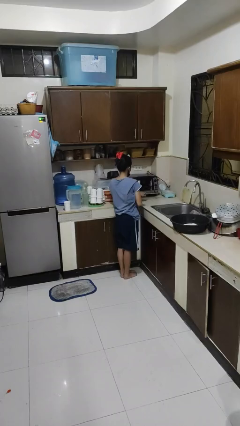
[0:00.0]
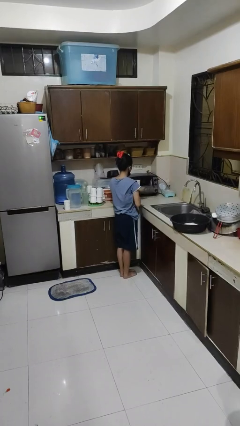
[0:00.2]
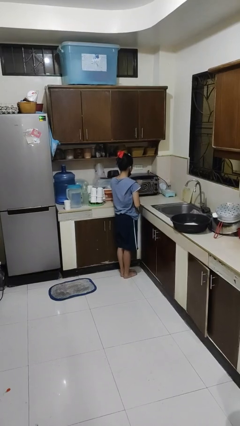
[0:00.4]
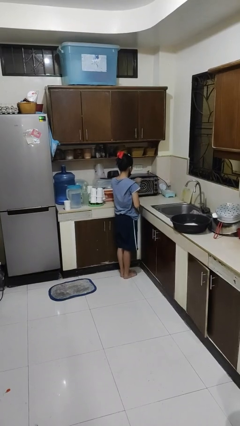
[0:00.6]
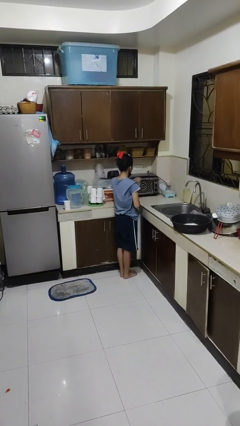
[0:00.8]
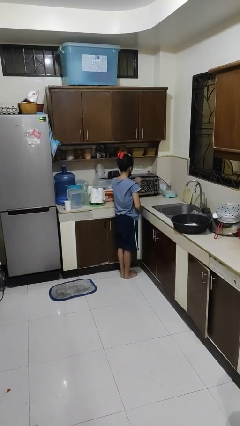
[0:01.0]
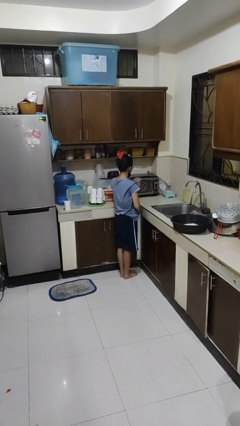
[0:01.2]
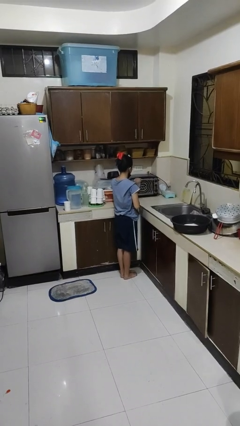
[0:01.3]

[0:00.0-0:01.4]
person closes microwave

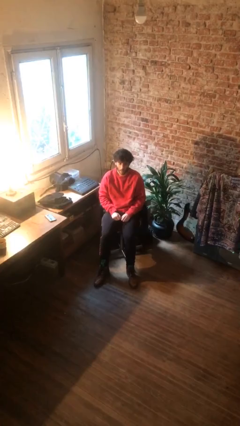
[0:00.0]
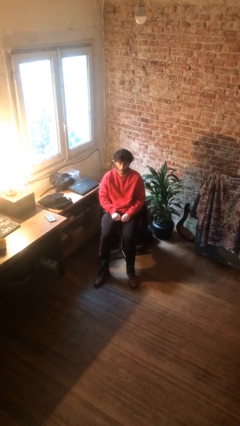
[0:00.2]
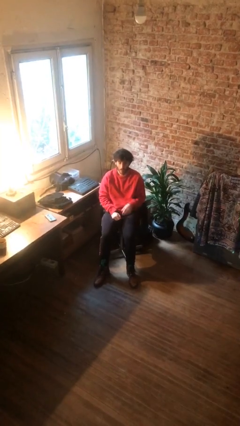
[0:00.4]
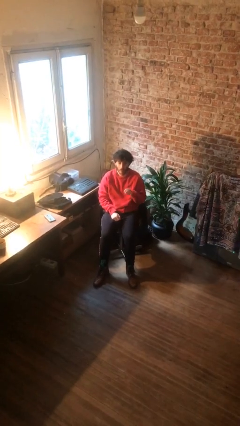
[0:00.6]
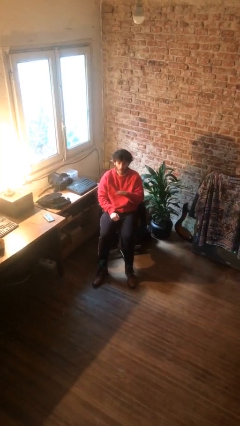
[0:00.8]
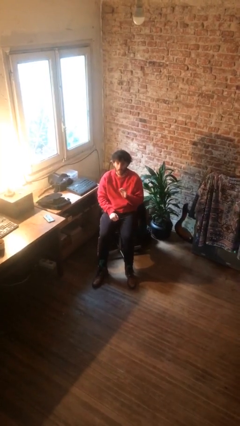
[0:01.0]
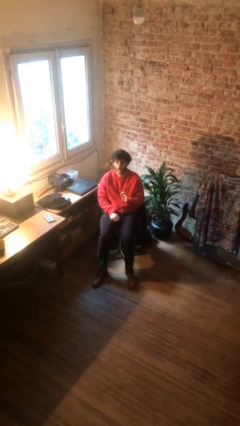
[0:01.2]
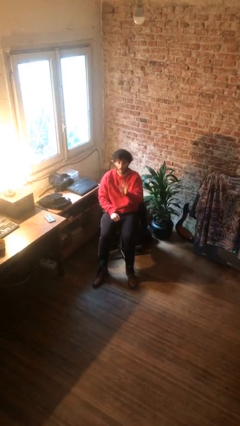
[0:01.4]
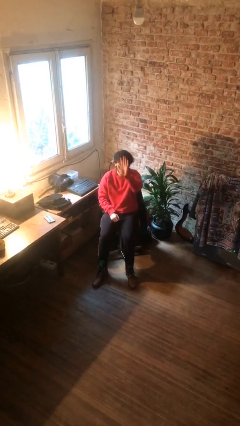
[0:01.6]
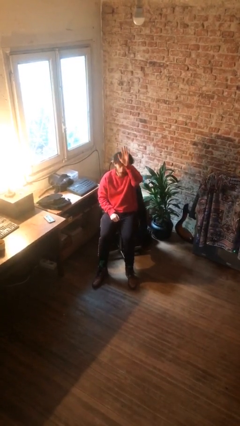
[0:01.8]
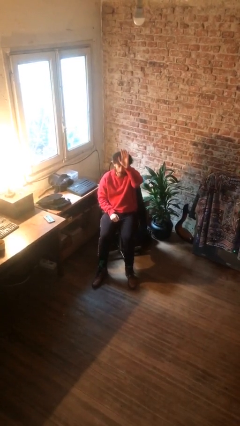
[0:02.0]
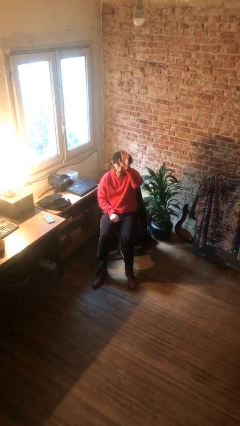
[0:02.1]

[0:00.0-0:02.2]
person gestures swipe up

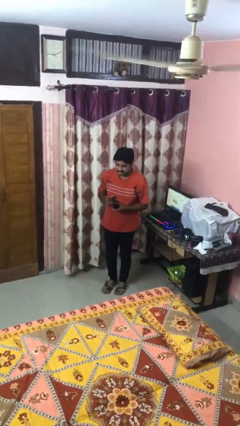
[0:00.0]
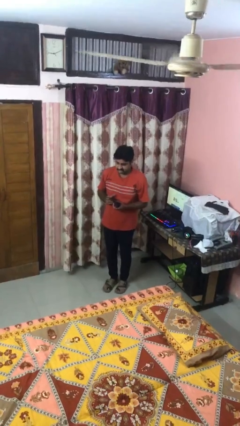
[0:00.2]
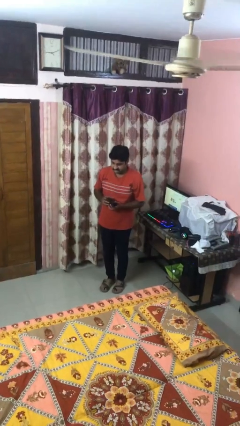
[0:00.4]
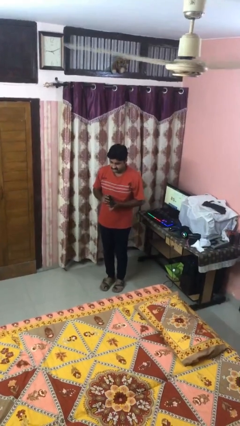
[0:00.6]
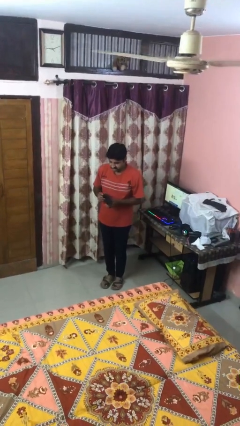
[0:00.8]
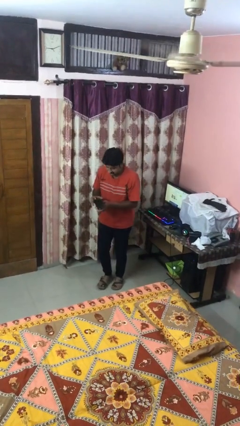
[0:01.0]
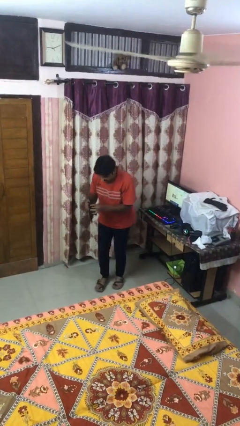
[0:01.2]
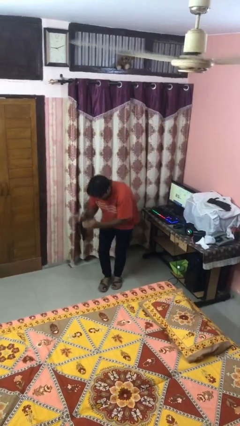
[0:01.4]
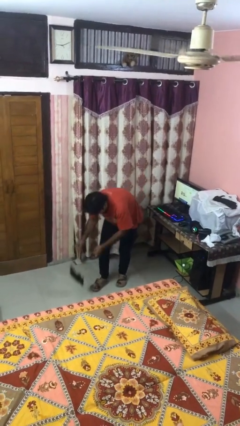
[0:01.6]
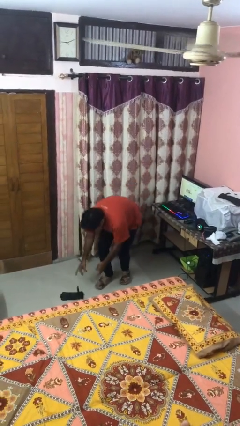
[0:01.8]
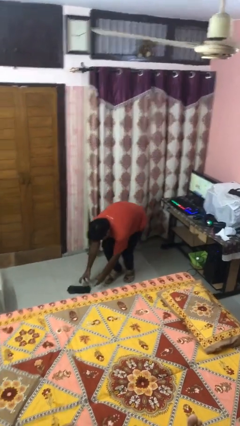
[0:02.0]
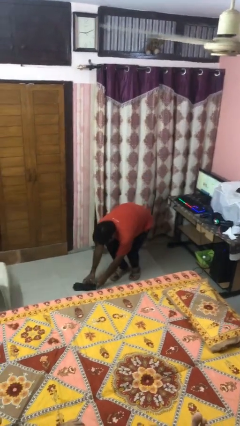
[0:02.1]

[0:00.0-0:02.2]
person drops object

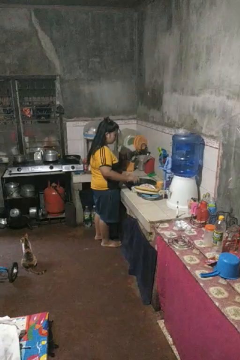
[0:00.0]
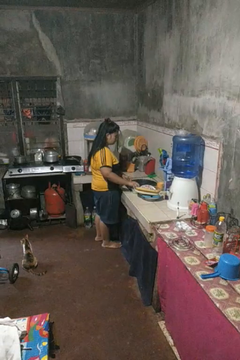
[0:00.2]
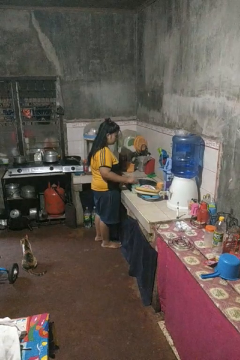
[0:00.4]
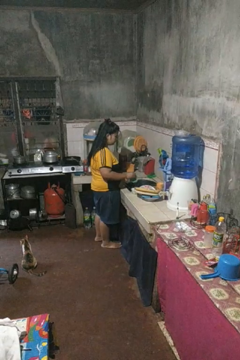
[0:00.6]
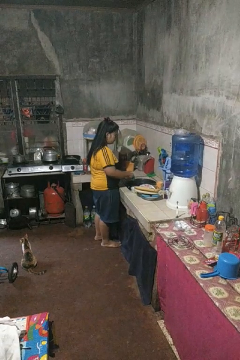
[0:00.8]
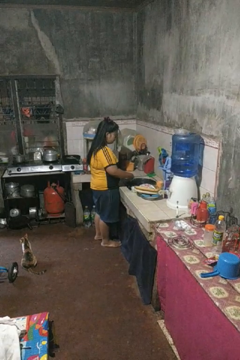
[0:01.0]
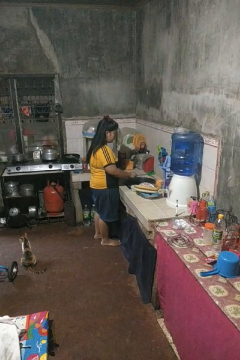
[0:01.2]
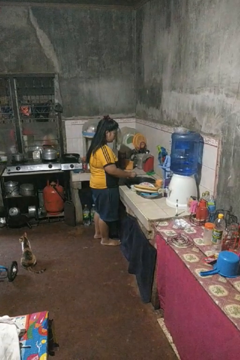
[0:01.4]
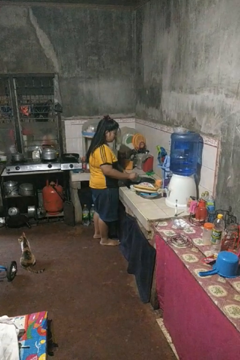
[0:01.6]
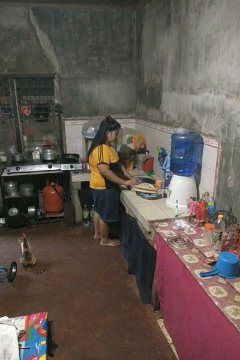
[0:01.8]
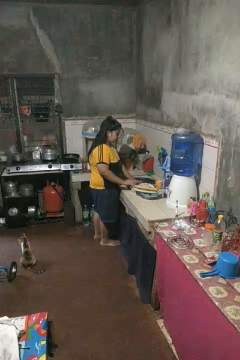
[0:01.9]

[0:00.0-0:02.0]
person washes dish

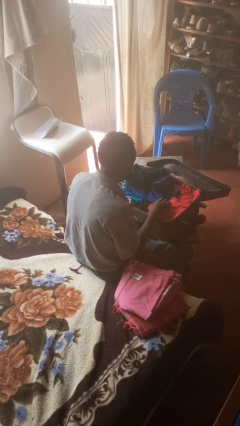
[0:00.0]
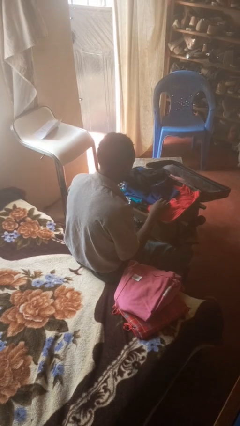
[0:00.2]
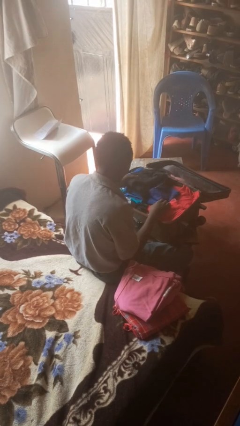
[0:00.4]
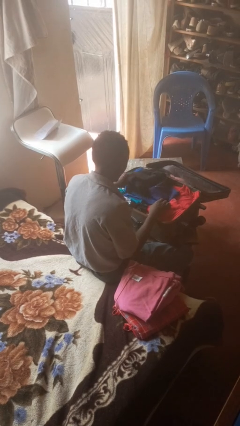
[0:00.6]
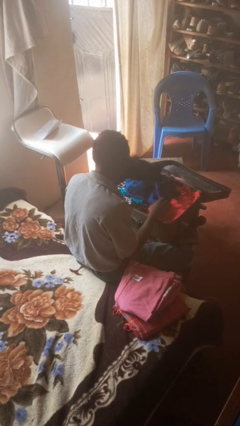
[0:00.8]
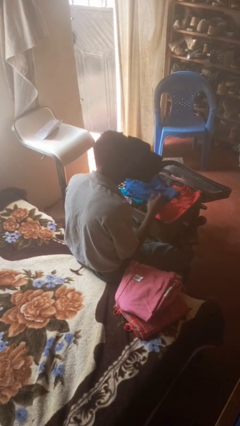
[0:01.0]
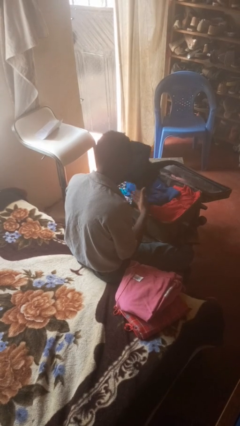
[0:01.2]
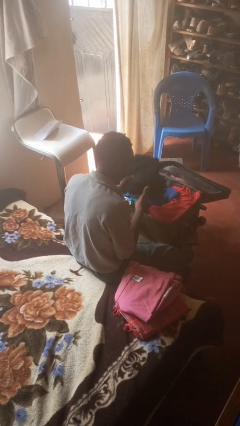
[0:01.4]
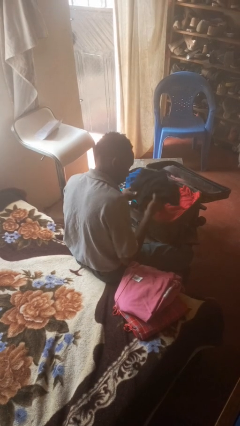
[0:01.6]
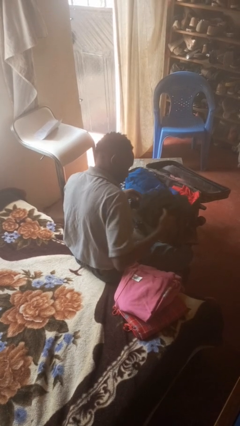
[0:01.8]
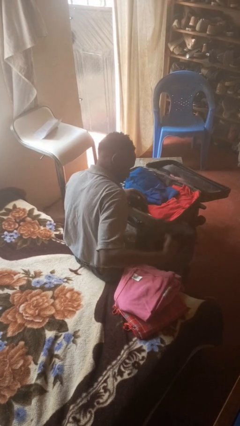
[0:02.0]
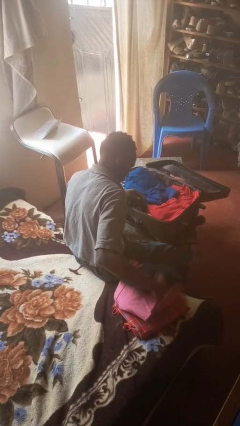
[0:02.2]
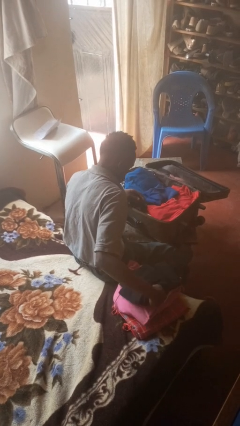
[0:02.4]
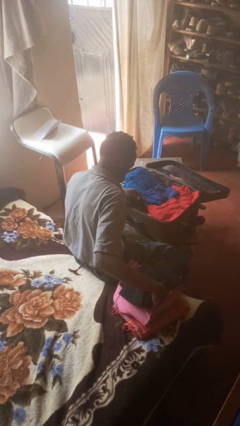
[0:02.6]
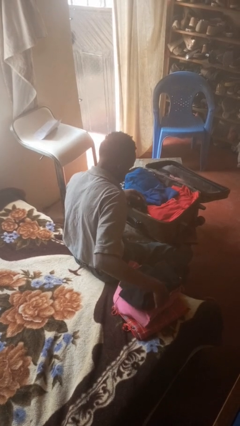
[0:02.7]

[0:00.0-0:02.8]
person unloads clothes from suitcase

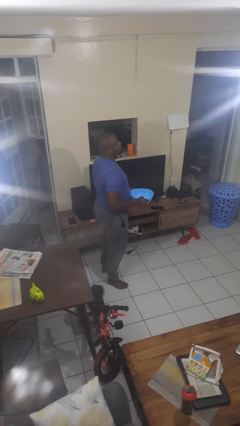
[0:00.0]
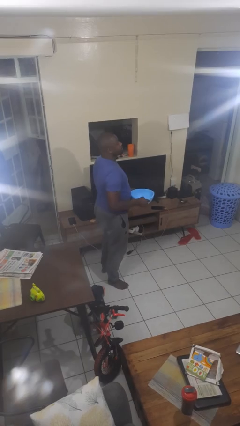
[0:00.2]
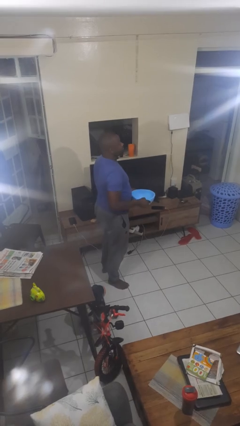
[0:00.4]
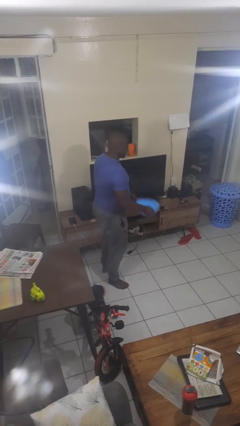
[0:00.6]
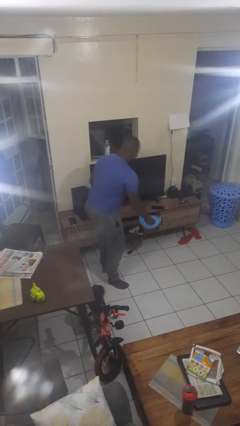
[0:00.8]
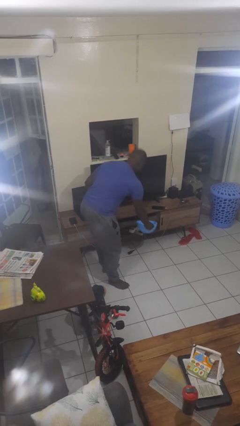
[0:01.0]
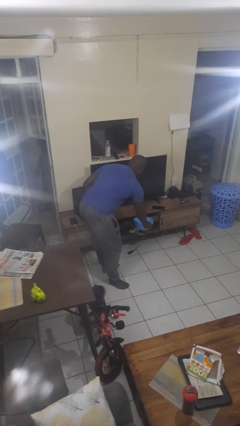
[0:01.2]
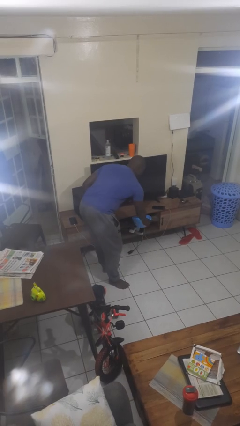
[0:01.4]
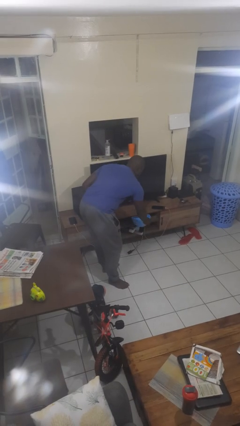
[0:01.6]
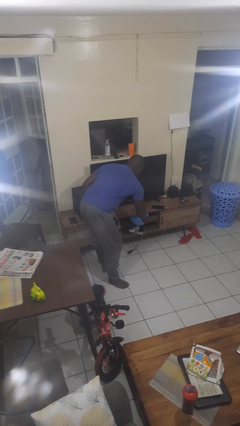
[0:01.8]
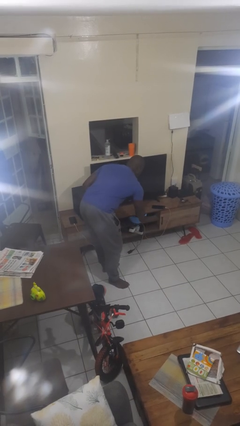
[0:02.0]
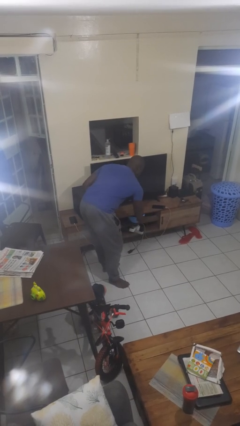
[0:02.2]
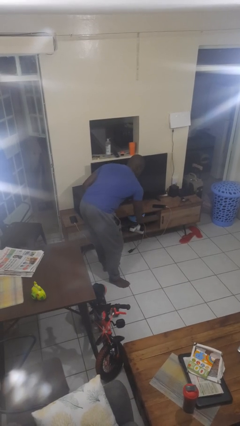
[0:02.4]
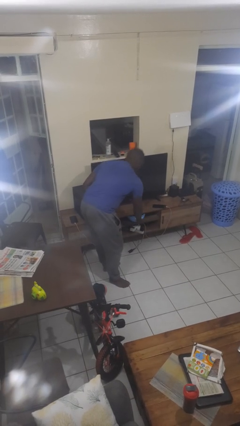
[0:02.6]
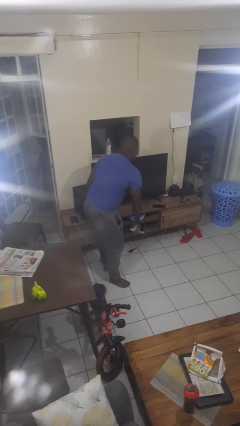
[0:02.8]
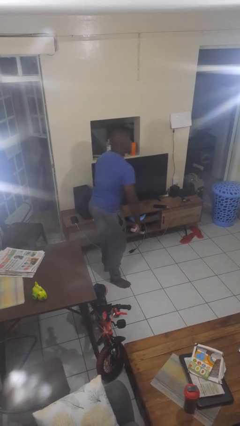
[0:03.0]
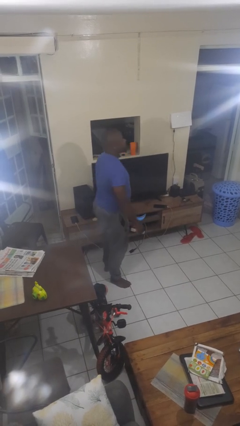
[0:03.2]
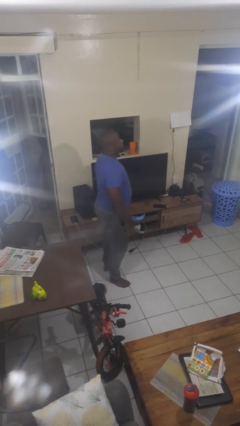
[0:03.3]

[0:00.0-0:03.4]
person puts down object into cabinet

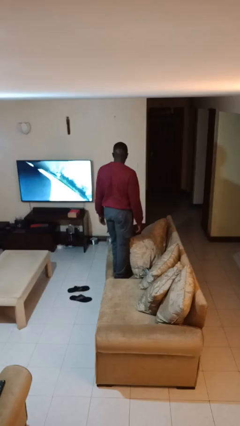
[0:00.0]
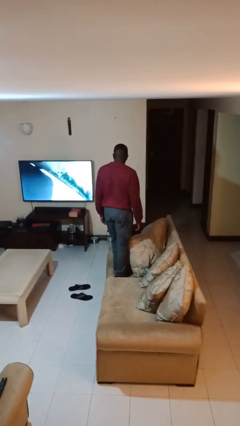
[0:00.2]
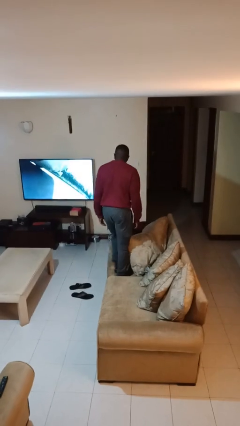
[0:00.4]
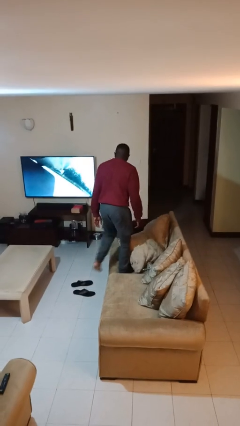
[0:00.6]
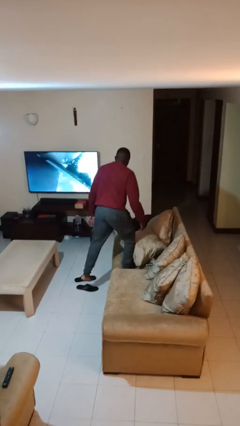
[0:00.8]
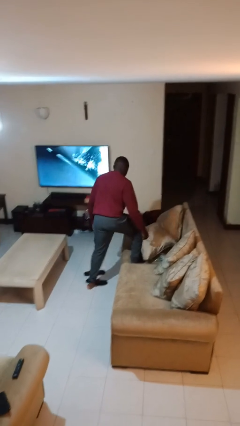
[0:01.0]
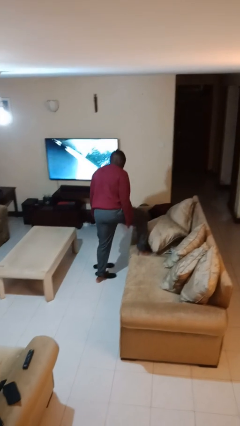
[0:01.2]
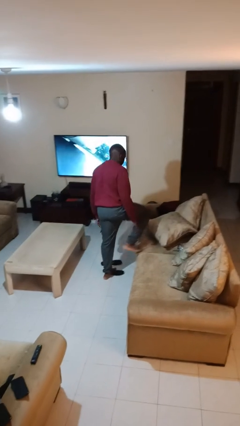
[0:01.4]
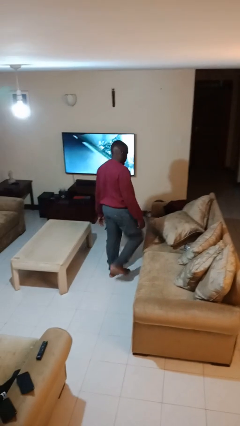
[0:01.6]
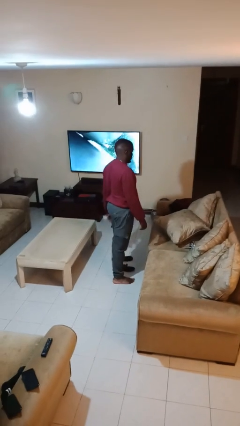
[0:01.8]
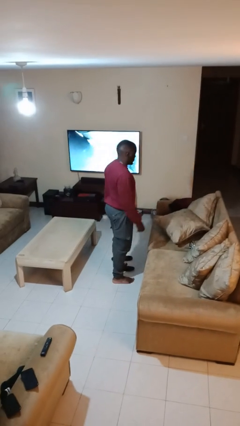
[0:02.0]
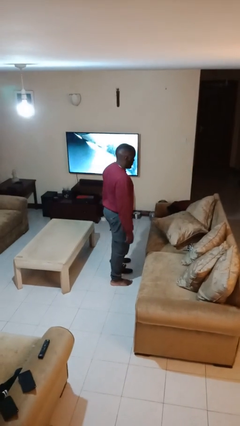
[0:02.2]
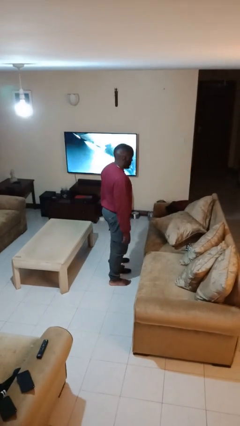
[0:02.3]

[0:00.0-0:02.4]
person climbs off couch

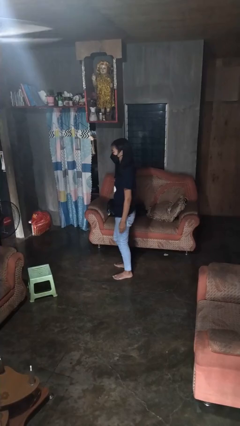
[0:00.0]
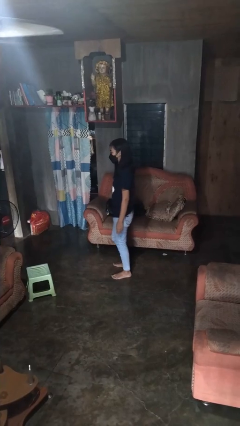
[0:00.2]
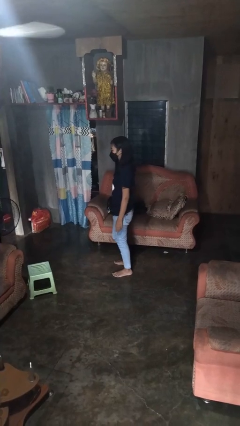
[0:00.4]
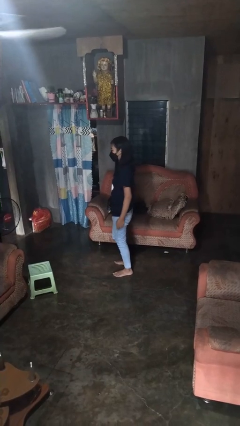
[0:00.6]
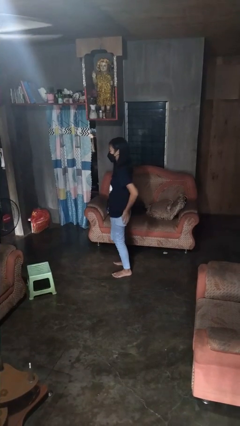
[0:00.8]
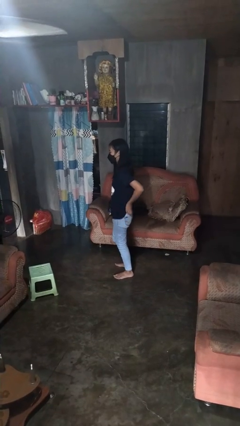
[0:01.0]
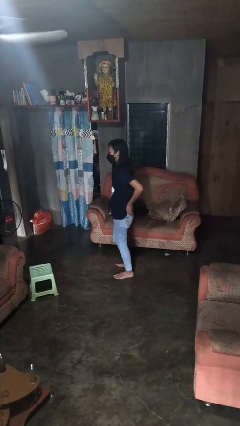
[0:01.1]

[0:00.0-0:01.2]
person puts hands in back pockets
